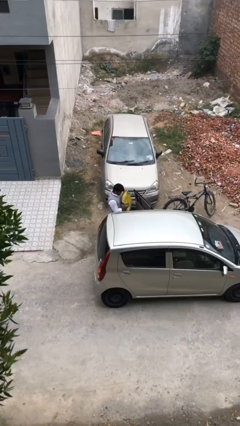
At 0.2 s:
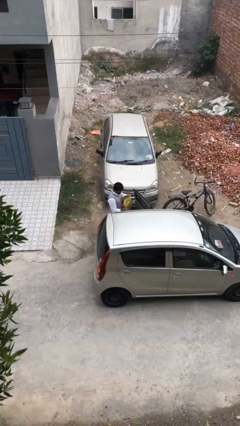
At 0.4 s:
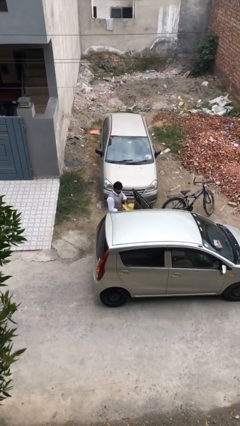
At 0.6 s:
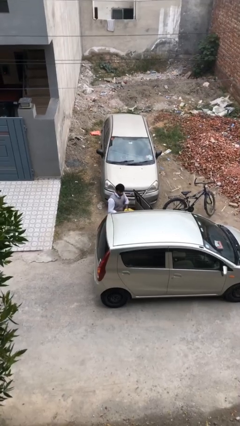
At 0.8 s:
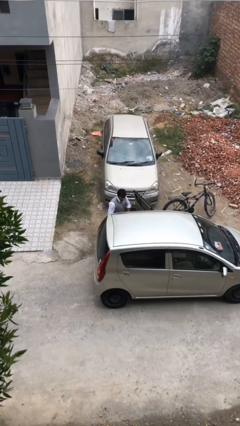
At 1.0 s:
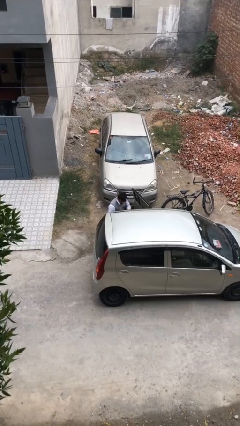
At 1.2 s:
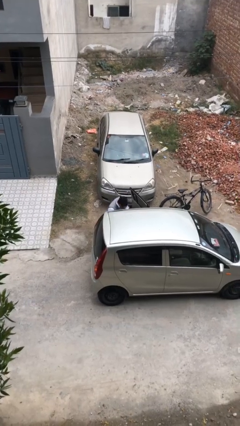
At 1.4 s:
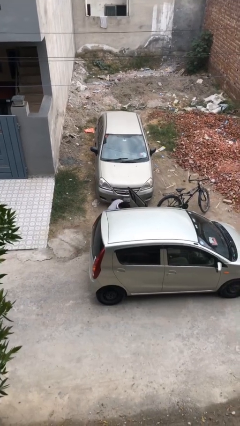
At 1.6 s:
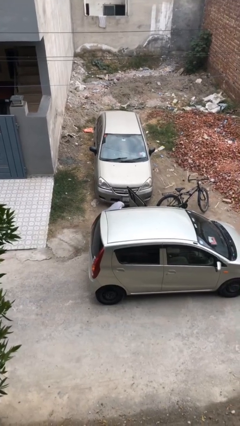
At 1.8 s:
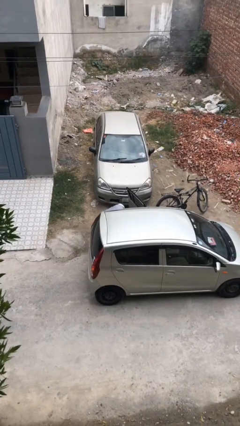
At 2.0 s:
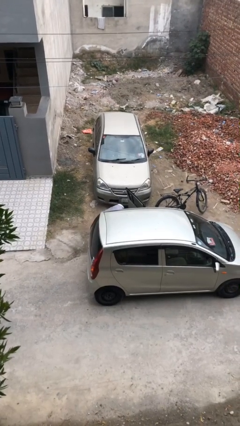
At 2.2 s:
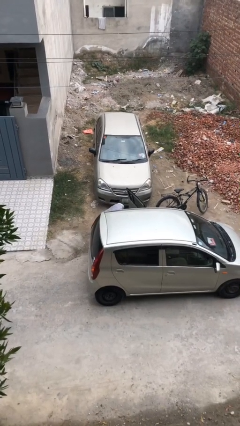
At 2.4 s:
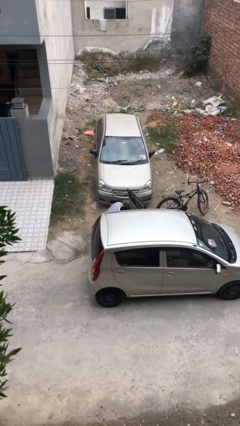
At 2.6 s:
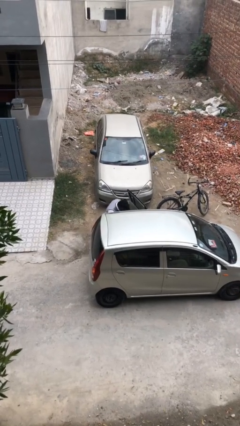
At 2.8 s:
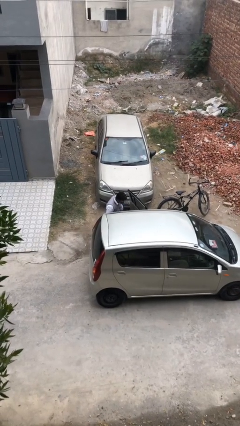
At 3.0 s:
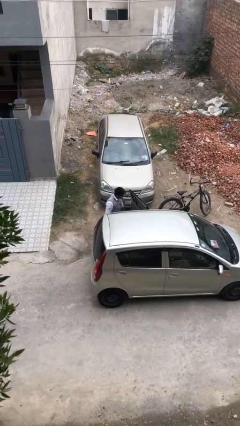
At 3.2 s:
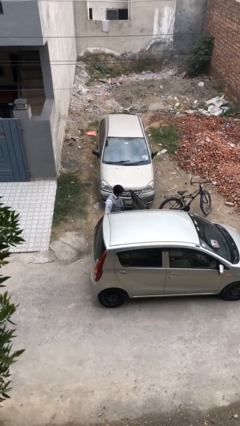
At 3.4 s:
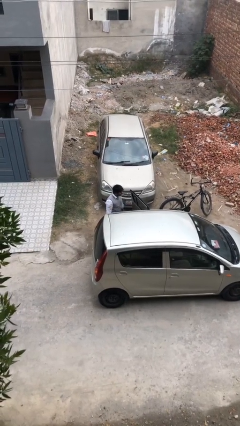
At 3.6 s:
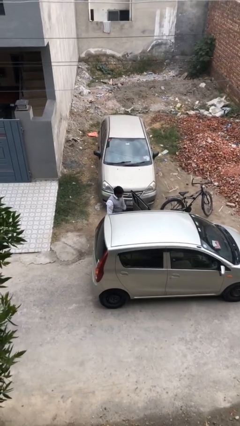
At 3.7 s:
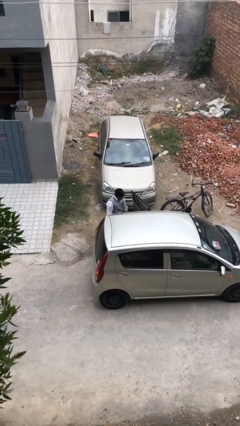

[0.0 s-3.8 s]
person loads car

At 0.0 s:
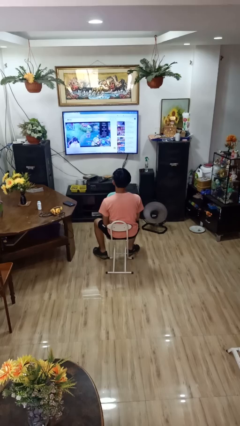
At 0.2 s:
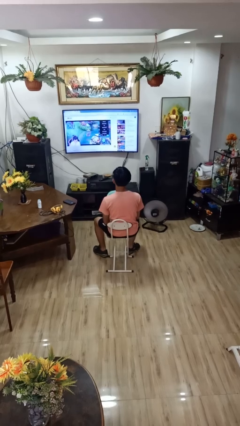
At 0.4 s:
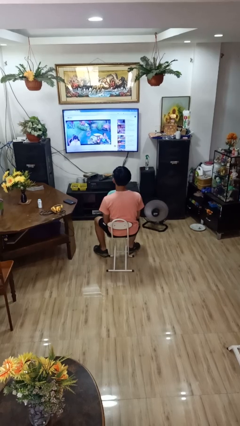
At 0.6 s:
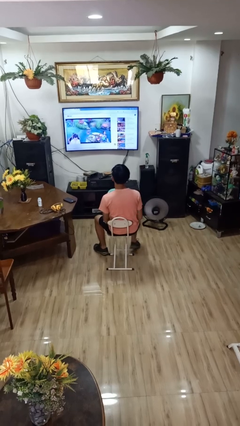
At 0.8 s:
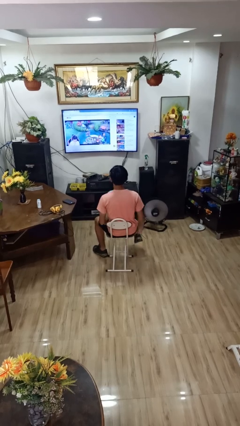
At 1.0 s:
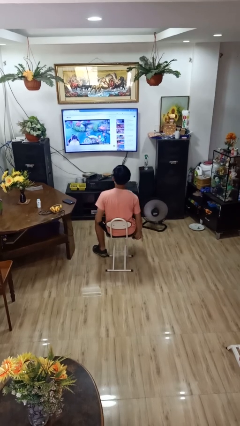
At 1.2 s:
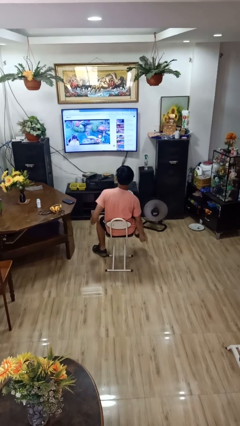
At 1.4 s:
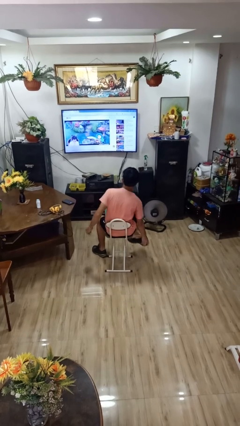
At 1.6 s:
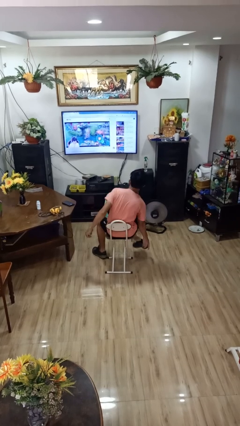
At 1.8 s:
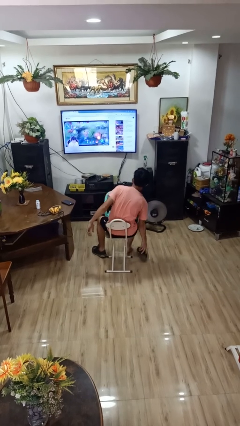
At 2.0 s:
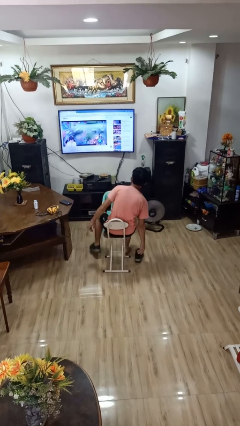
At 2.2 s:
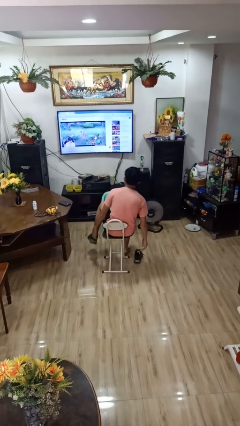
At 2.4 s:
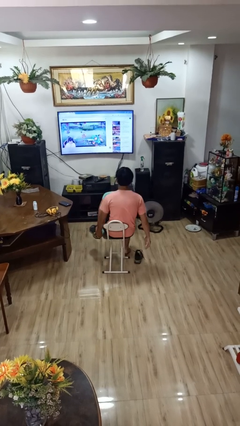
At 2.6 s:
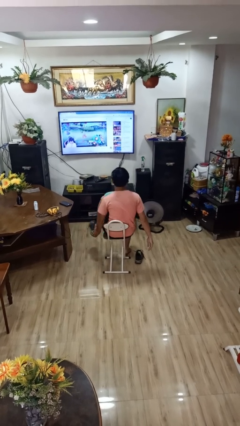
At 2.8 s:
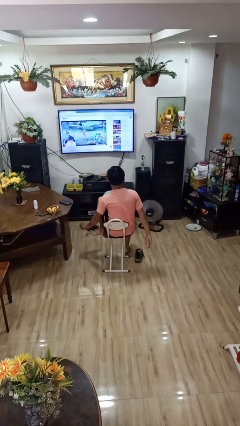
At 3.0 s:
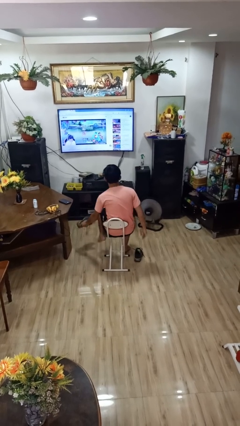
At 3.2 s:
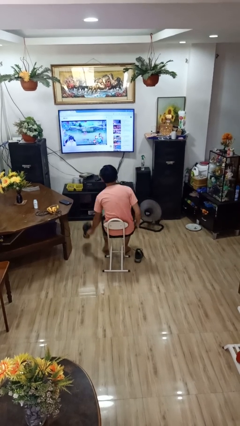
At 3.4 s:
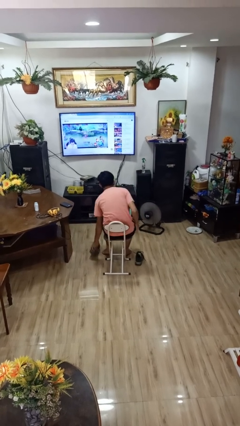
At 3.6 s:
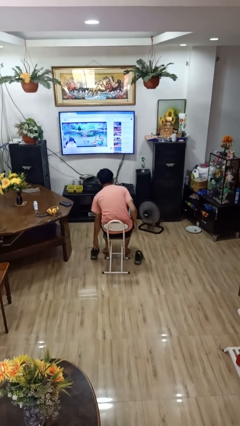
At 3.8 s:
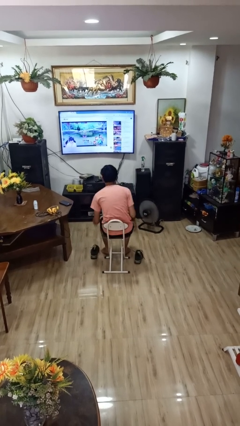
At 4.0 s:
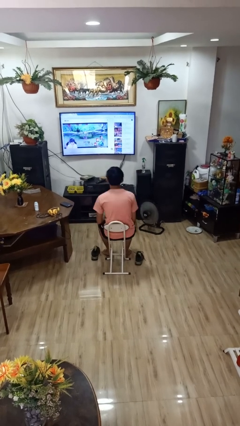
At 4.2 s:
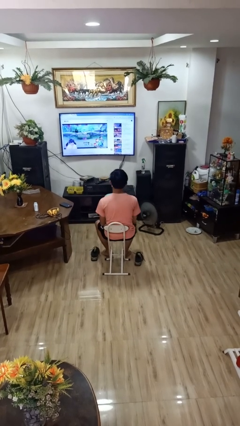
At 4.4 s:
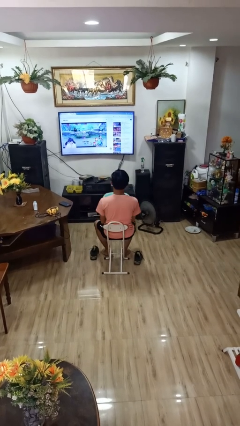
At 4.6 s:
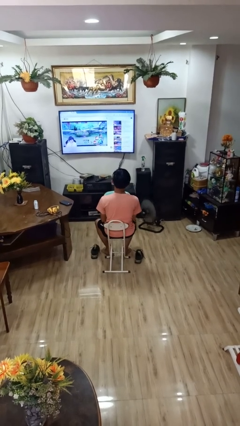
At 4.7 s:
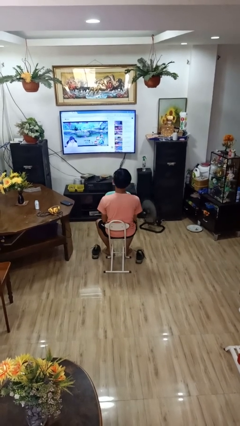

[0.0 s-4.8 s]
person takes off shoes

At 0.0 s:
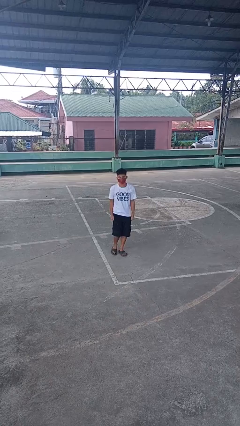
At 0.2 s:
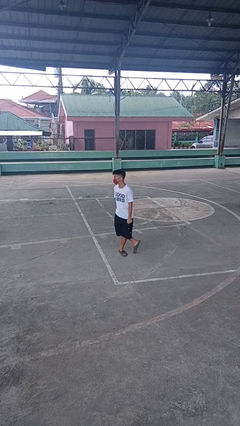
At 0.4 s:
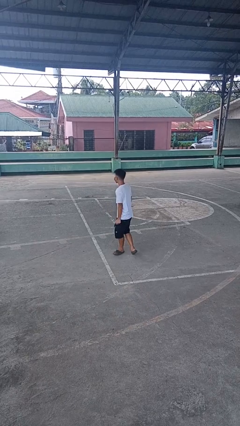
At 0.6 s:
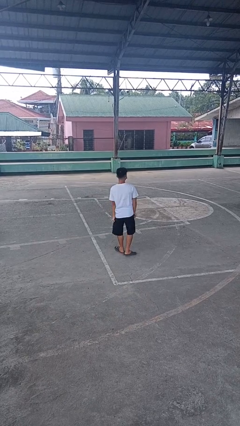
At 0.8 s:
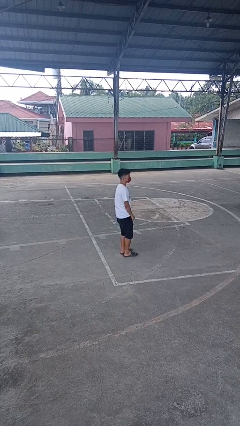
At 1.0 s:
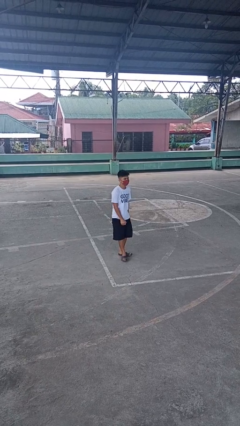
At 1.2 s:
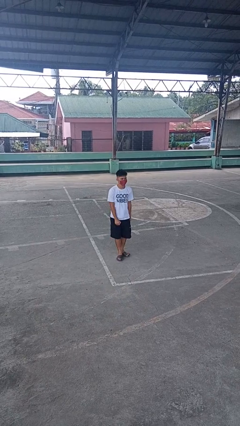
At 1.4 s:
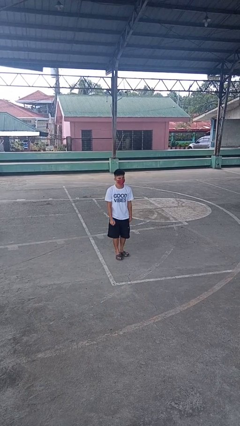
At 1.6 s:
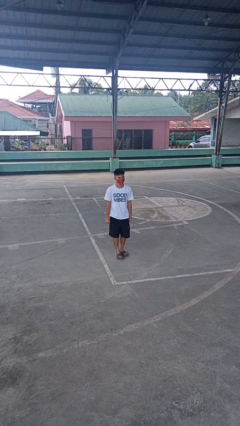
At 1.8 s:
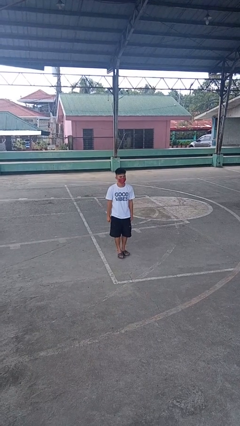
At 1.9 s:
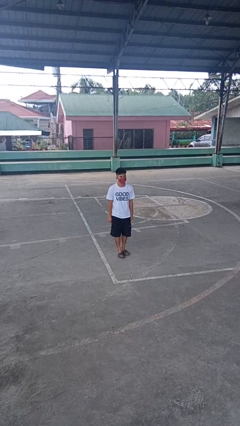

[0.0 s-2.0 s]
person twirls

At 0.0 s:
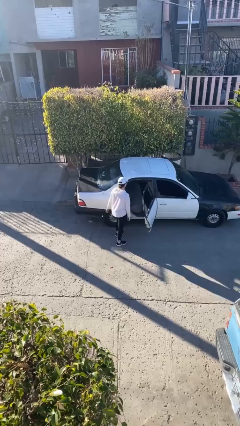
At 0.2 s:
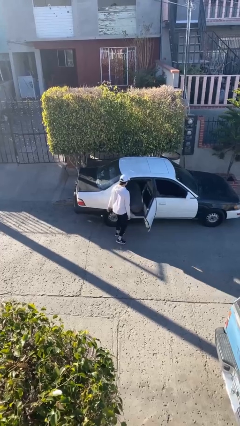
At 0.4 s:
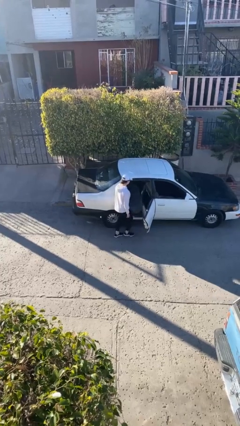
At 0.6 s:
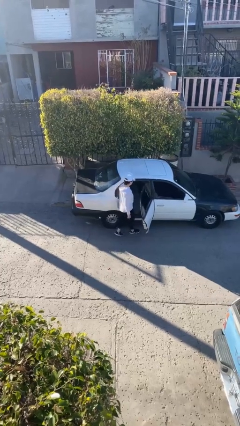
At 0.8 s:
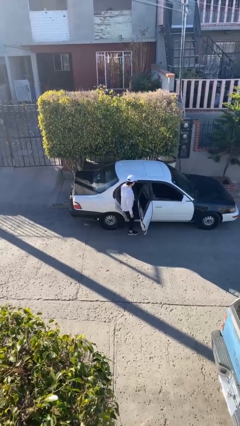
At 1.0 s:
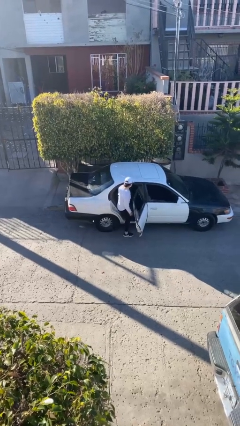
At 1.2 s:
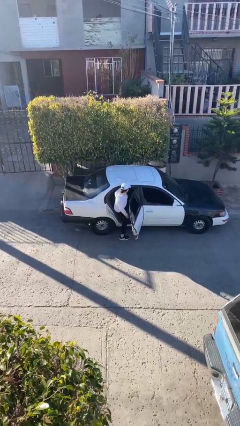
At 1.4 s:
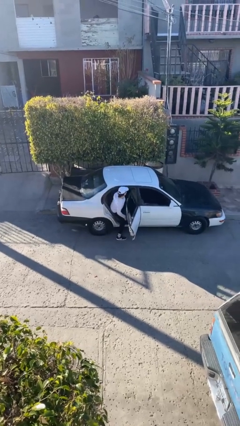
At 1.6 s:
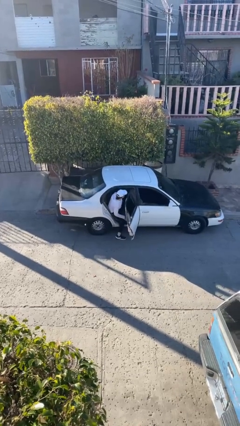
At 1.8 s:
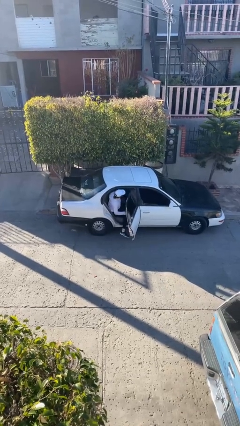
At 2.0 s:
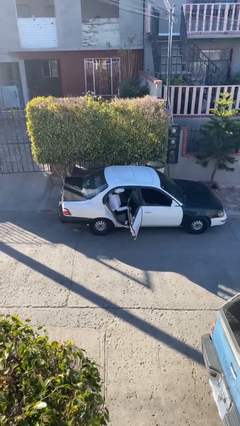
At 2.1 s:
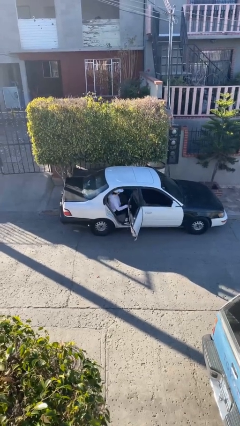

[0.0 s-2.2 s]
person enters car

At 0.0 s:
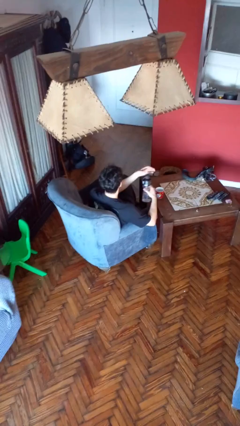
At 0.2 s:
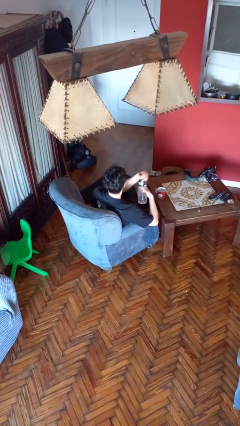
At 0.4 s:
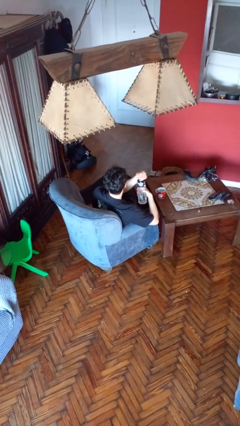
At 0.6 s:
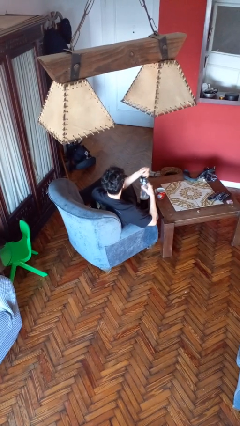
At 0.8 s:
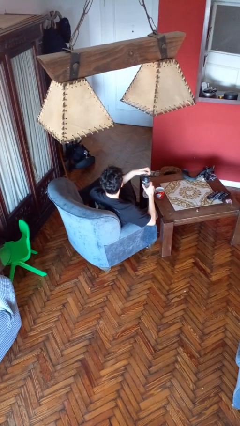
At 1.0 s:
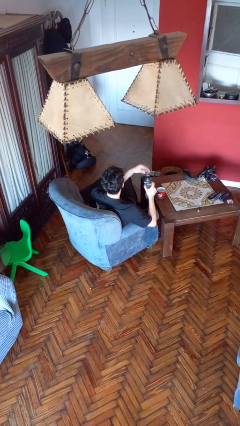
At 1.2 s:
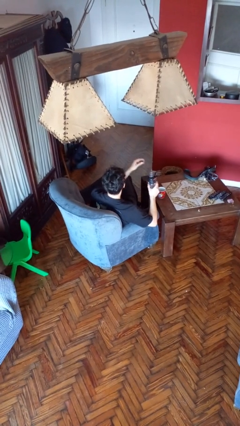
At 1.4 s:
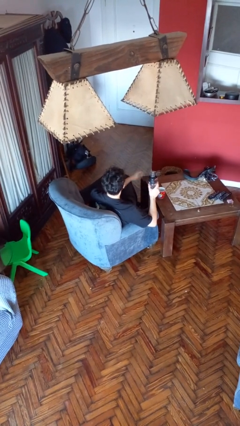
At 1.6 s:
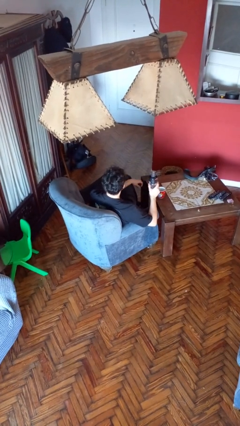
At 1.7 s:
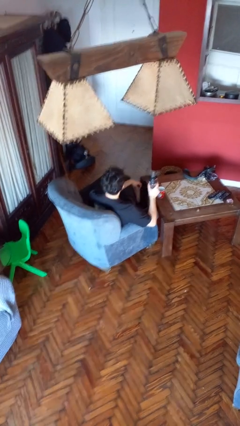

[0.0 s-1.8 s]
person unscrews lid from bottle

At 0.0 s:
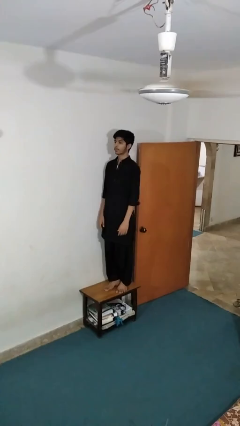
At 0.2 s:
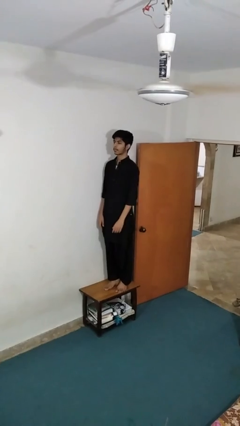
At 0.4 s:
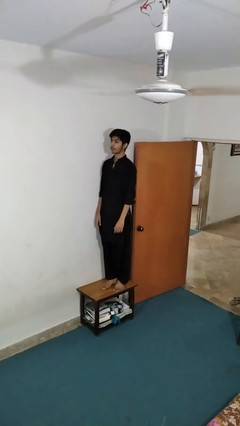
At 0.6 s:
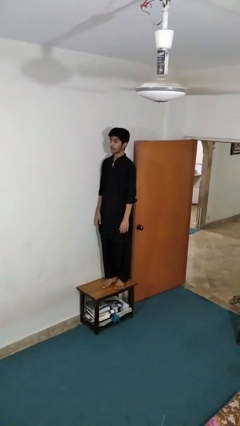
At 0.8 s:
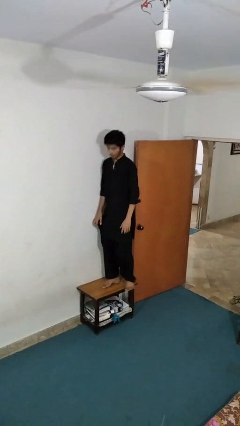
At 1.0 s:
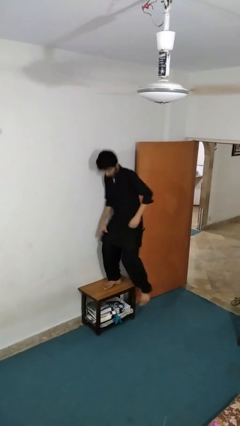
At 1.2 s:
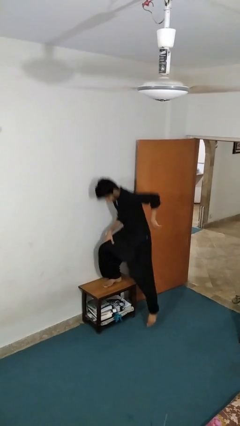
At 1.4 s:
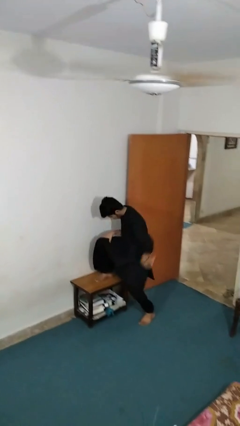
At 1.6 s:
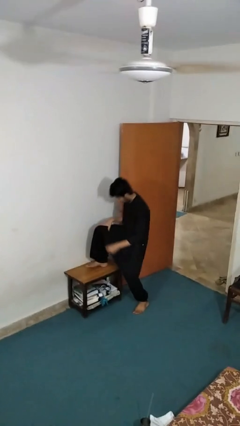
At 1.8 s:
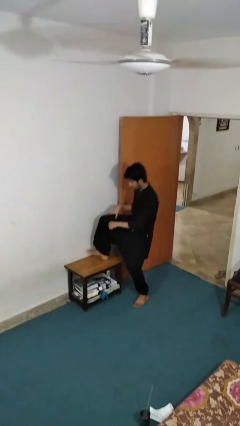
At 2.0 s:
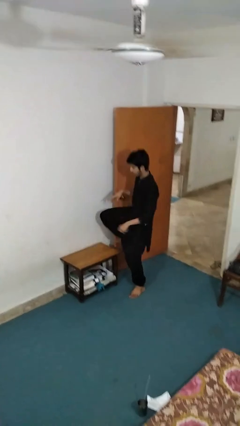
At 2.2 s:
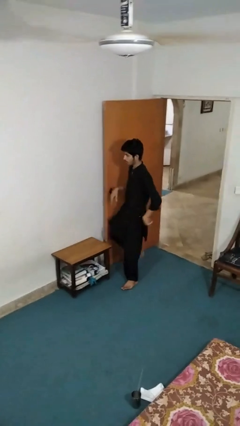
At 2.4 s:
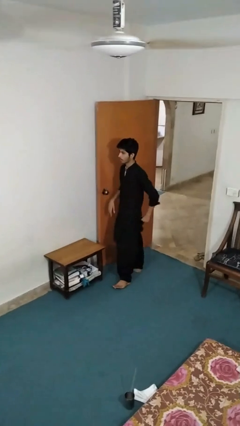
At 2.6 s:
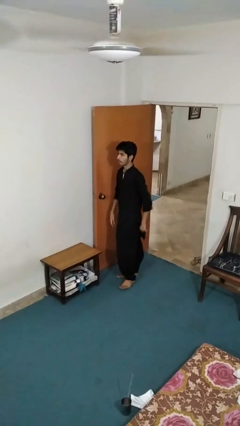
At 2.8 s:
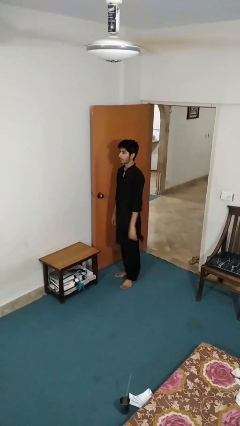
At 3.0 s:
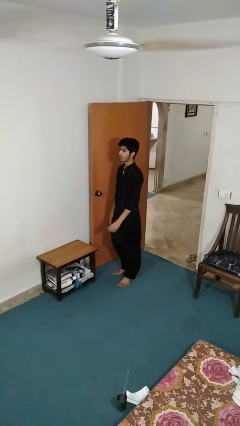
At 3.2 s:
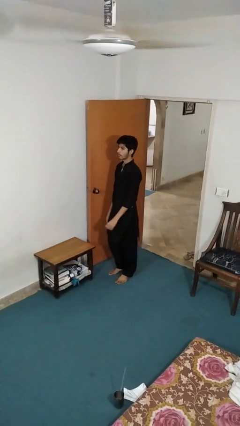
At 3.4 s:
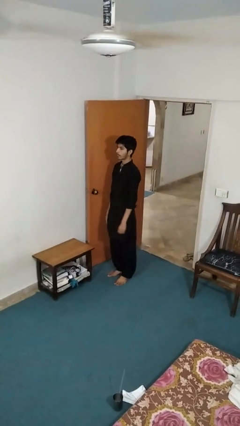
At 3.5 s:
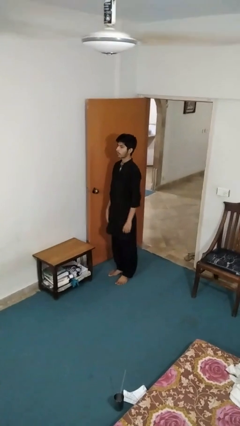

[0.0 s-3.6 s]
person climbs off table
